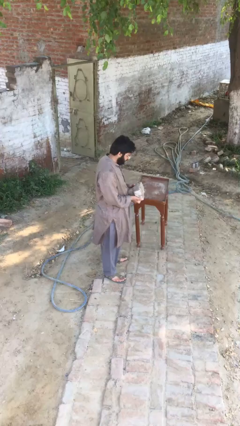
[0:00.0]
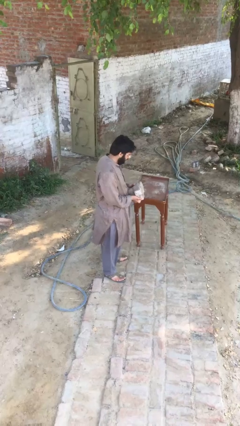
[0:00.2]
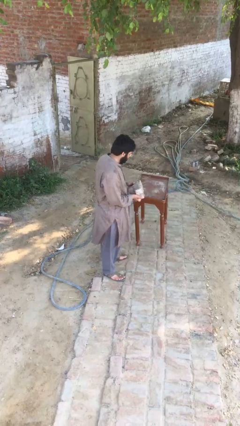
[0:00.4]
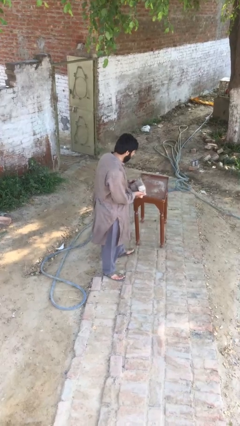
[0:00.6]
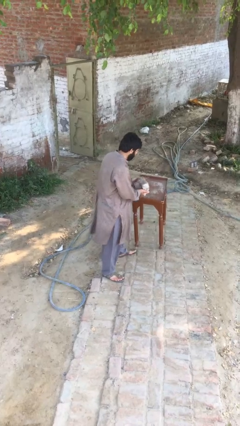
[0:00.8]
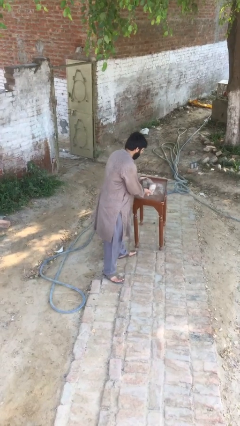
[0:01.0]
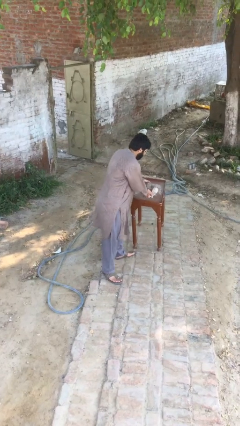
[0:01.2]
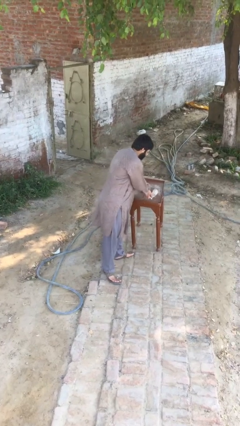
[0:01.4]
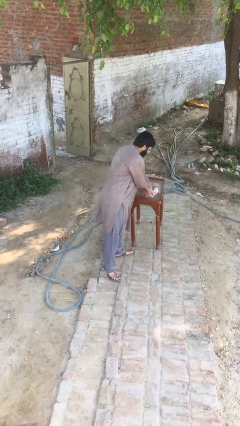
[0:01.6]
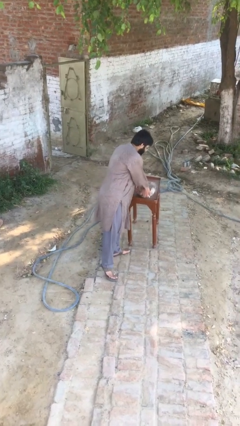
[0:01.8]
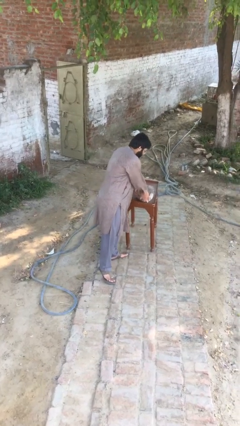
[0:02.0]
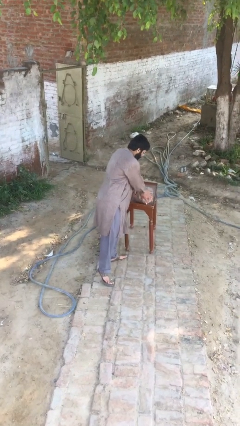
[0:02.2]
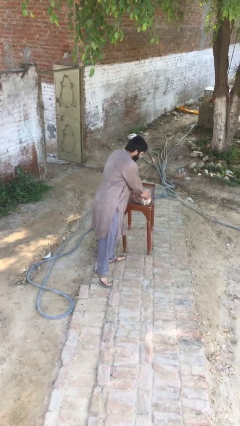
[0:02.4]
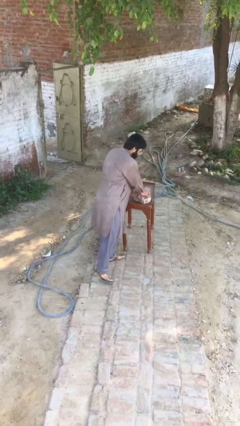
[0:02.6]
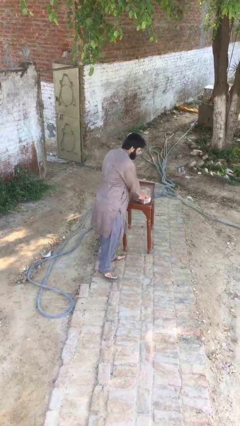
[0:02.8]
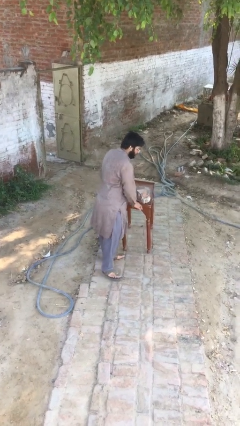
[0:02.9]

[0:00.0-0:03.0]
person puts down object on table

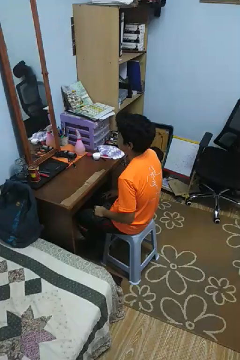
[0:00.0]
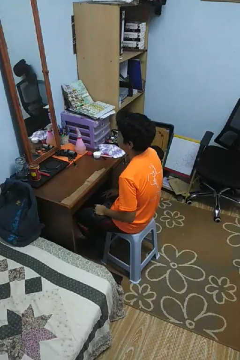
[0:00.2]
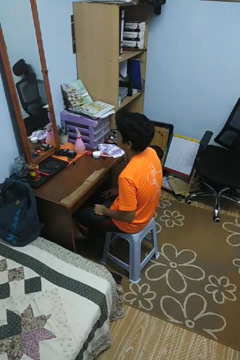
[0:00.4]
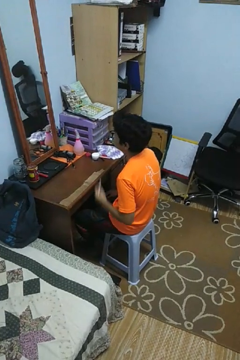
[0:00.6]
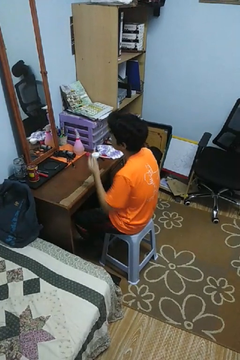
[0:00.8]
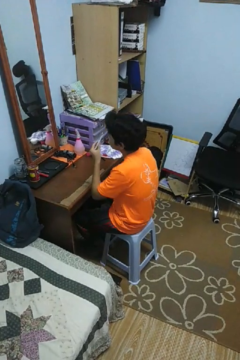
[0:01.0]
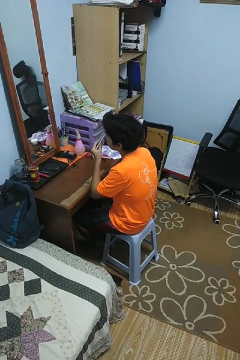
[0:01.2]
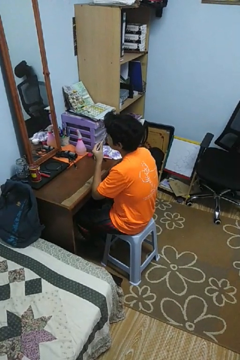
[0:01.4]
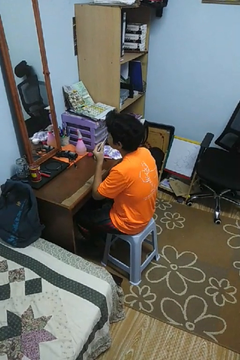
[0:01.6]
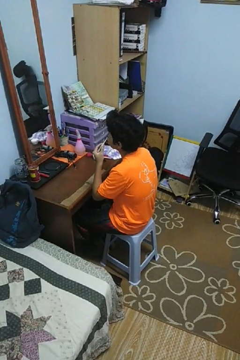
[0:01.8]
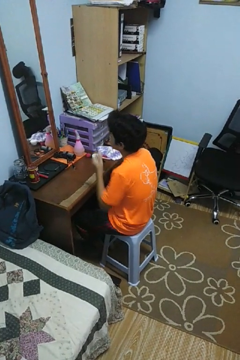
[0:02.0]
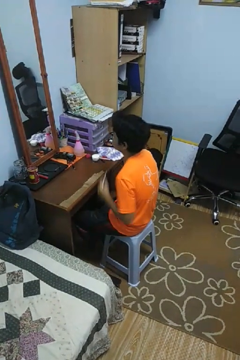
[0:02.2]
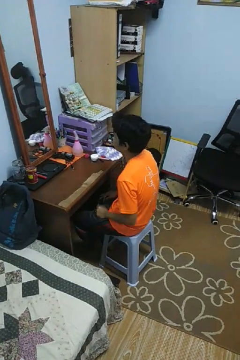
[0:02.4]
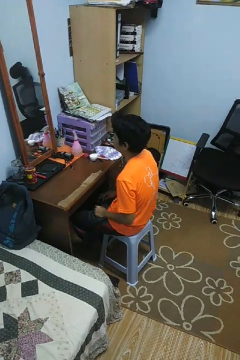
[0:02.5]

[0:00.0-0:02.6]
person applies eye makeup

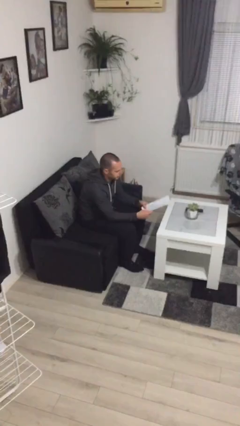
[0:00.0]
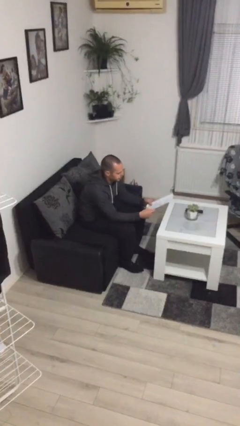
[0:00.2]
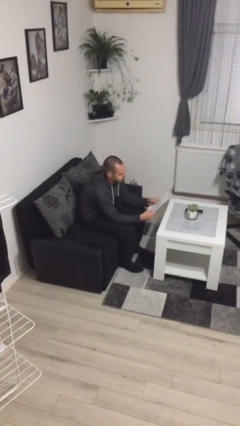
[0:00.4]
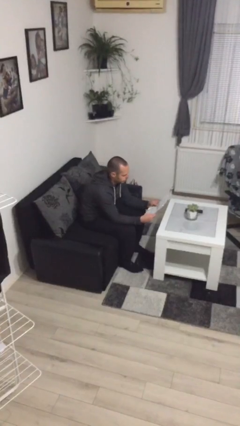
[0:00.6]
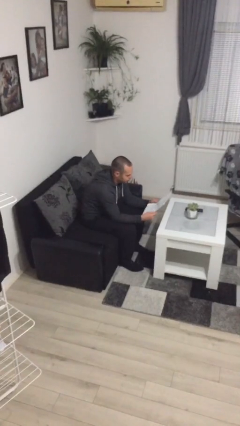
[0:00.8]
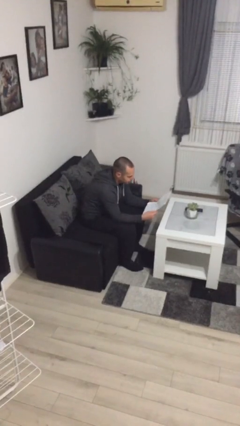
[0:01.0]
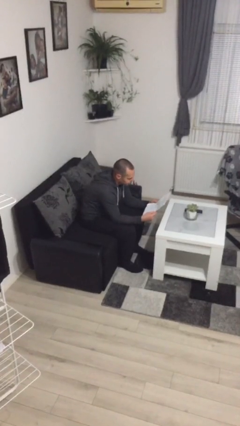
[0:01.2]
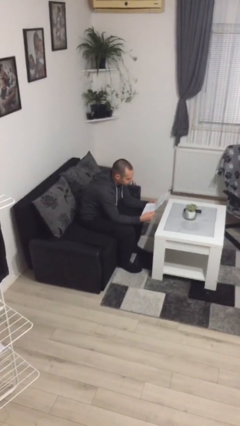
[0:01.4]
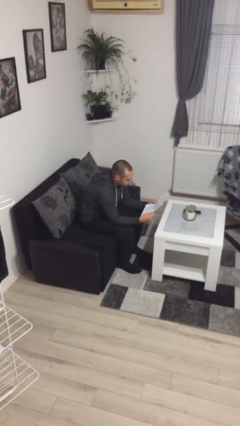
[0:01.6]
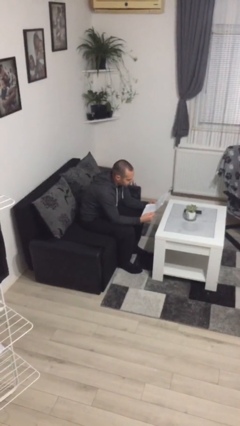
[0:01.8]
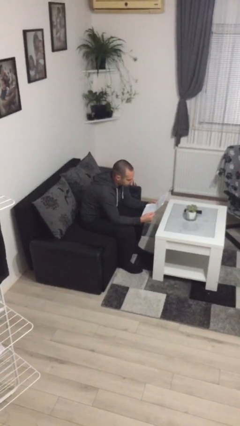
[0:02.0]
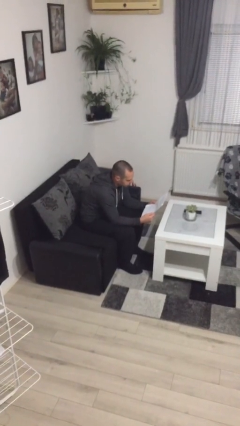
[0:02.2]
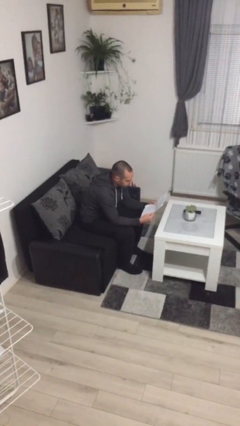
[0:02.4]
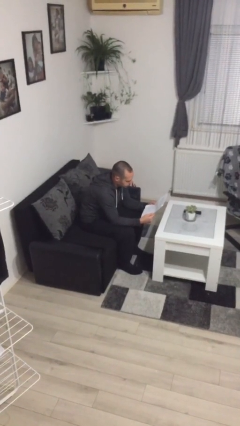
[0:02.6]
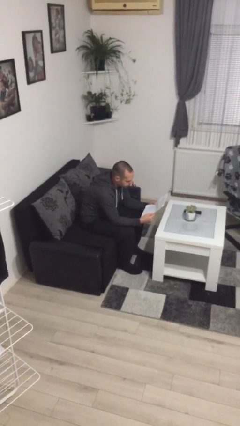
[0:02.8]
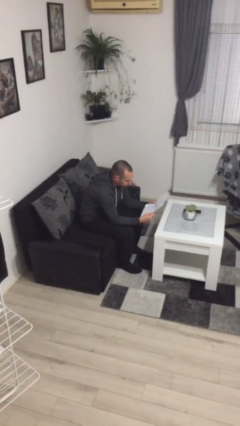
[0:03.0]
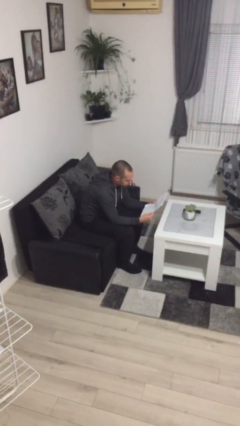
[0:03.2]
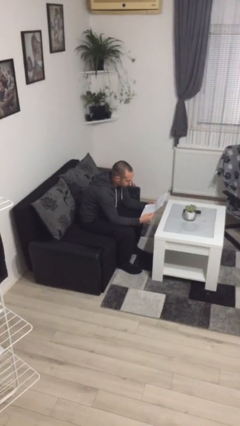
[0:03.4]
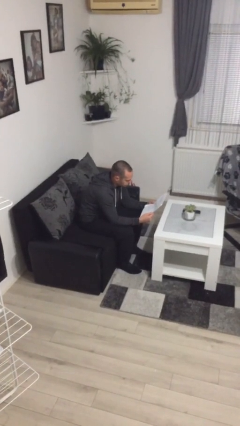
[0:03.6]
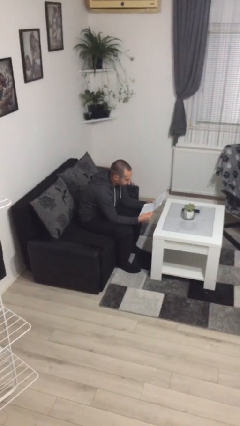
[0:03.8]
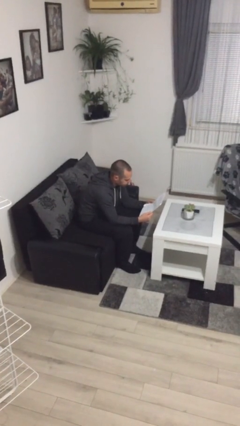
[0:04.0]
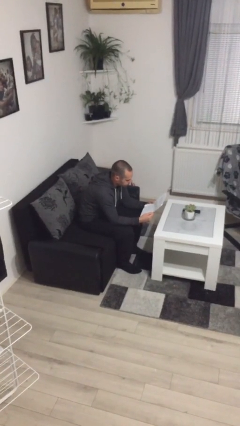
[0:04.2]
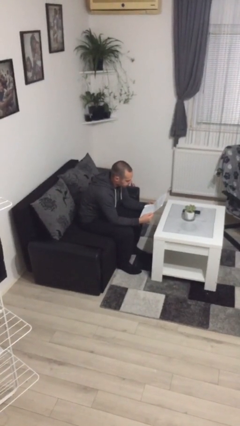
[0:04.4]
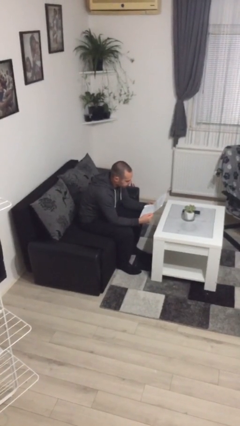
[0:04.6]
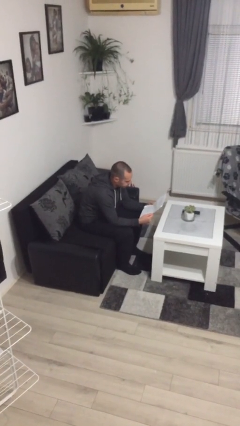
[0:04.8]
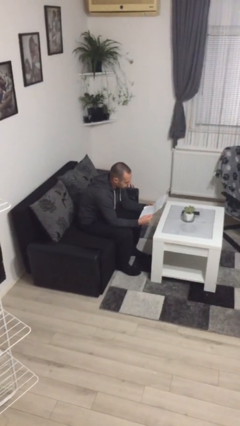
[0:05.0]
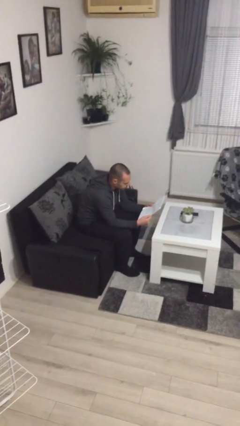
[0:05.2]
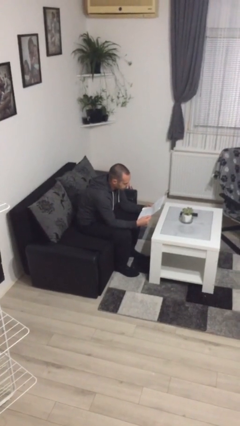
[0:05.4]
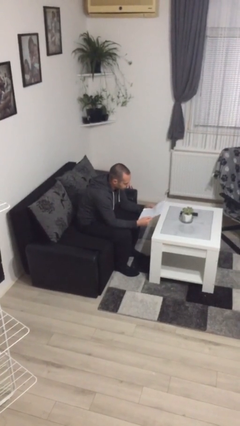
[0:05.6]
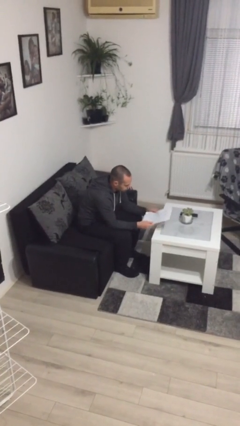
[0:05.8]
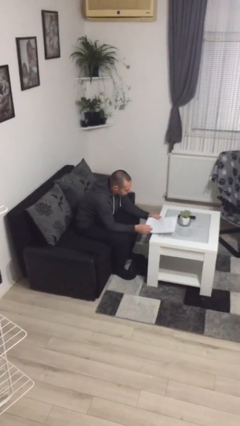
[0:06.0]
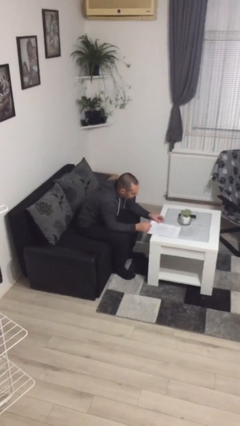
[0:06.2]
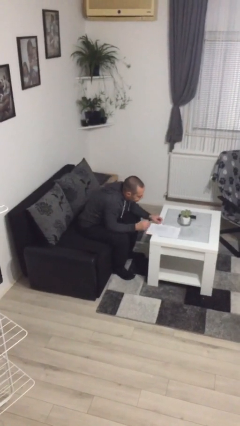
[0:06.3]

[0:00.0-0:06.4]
person reads document

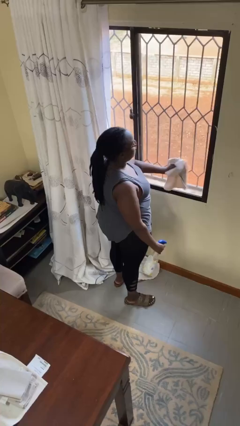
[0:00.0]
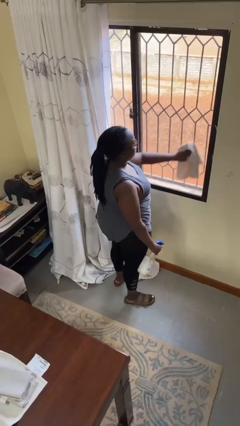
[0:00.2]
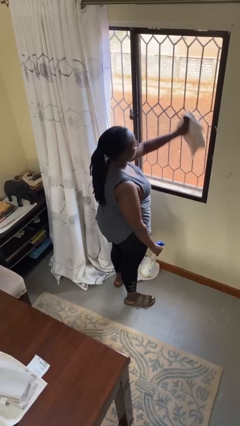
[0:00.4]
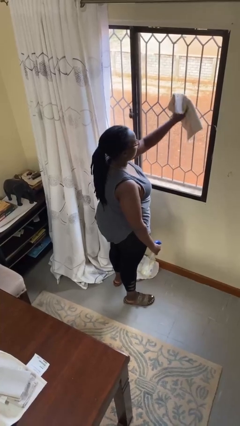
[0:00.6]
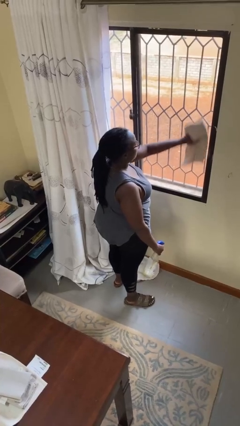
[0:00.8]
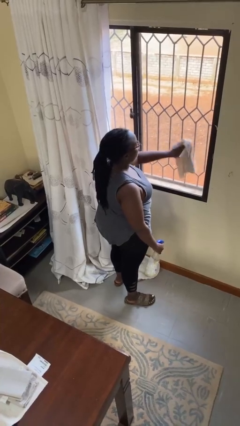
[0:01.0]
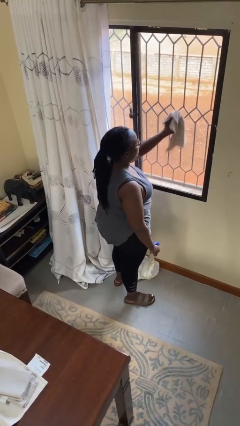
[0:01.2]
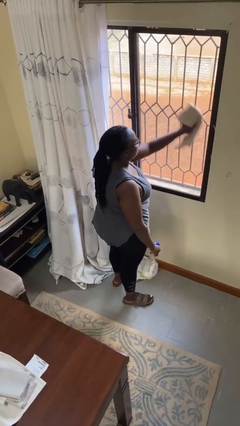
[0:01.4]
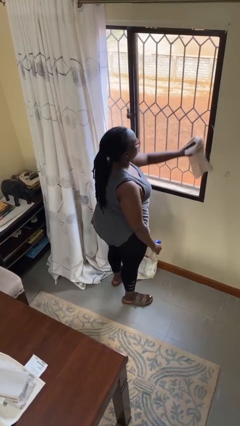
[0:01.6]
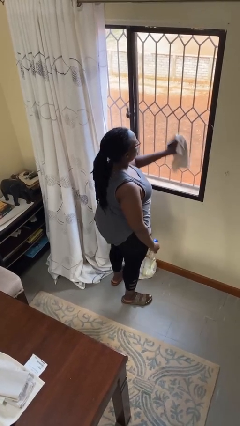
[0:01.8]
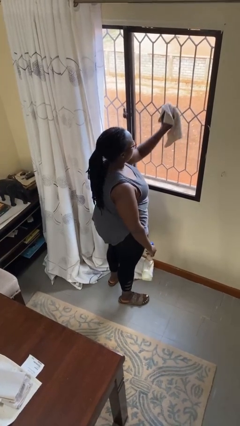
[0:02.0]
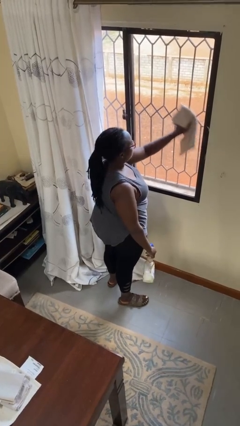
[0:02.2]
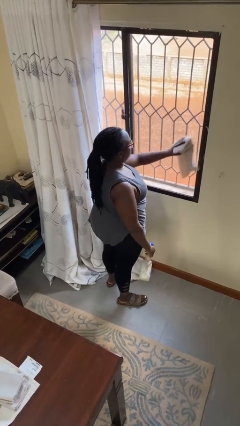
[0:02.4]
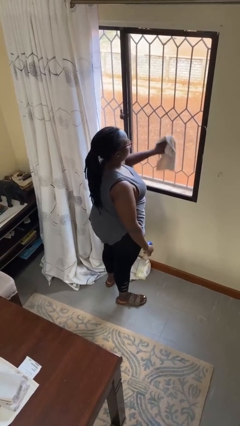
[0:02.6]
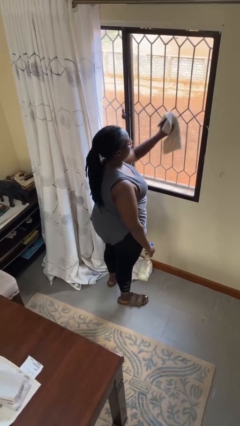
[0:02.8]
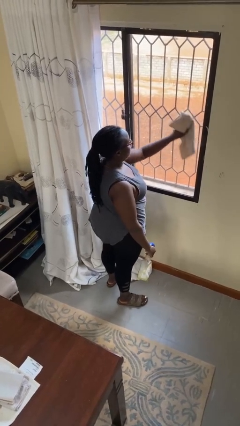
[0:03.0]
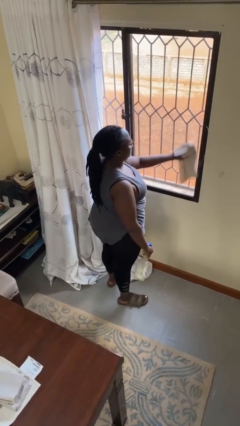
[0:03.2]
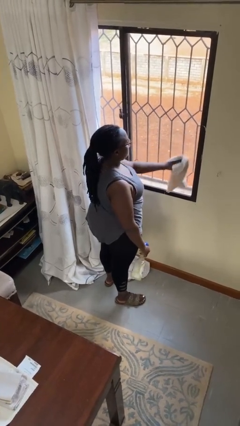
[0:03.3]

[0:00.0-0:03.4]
person washes window

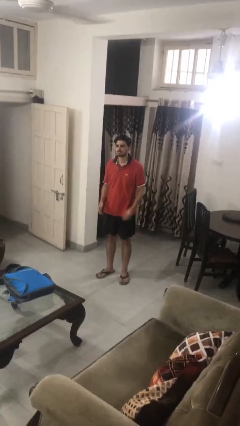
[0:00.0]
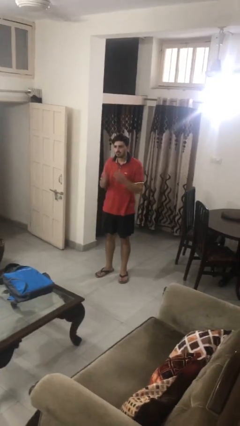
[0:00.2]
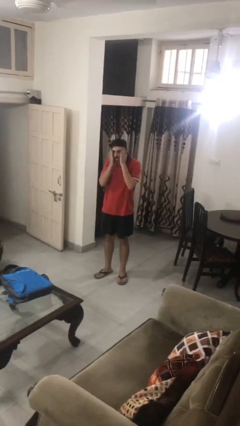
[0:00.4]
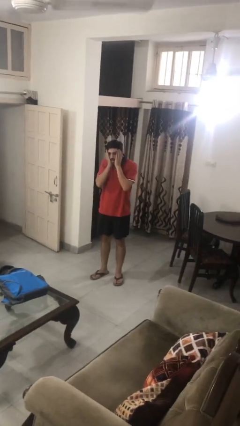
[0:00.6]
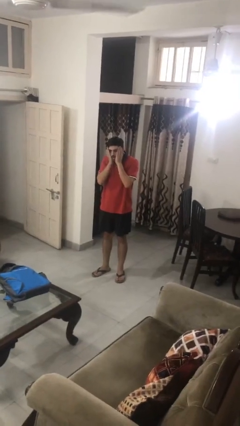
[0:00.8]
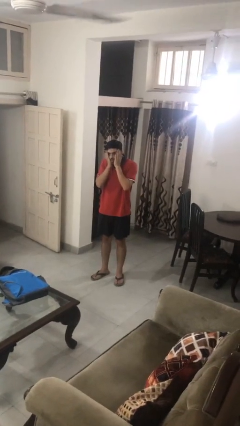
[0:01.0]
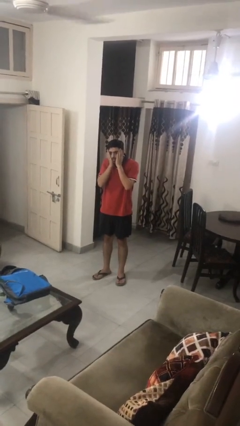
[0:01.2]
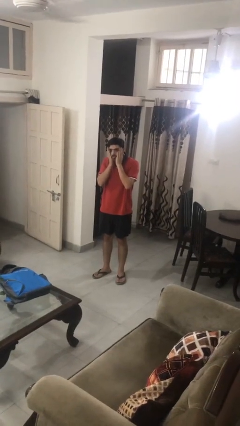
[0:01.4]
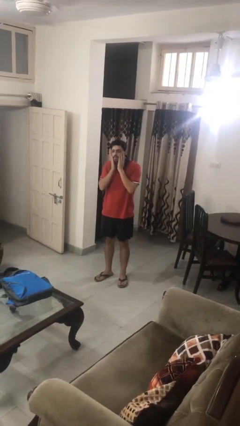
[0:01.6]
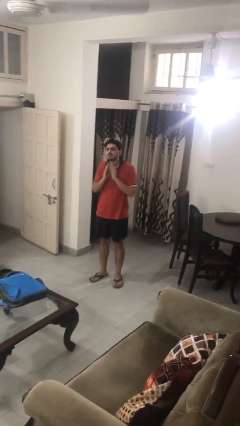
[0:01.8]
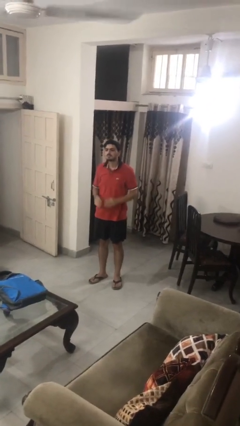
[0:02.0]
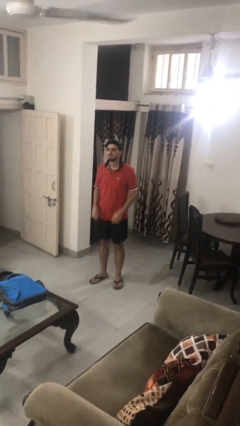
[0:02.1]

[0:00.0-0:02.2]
person covers face with hands

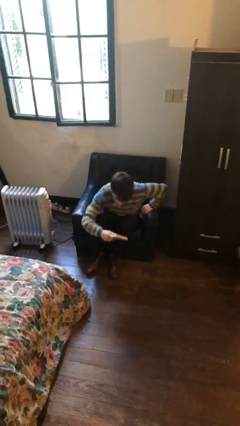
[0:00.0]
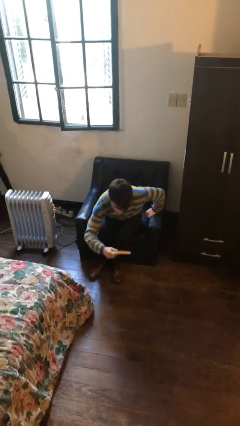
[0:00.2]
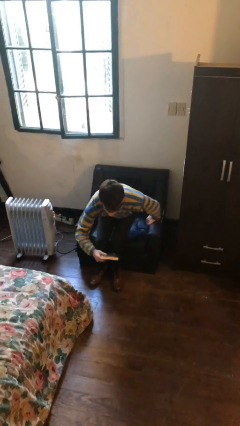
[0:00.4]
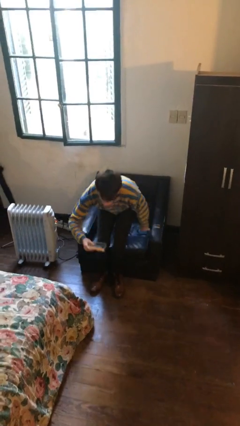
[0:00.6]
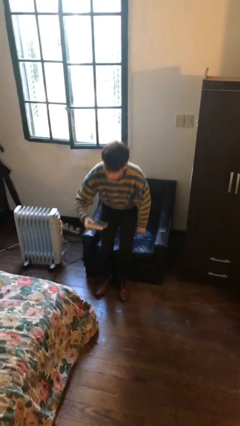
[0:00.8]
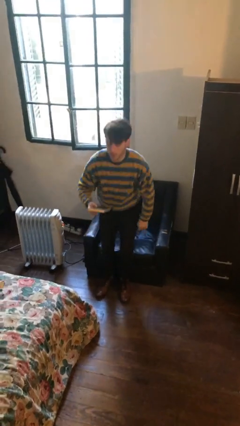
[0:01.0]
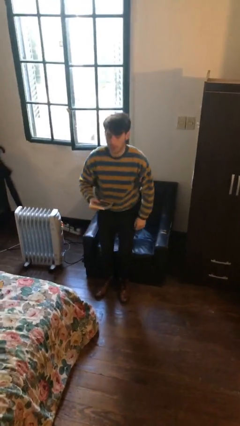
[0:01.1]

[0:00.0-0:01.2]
person stands up
